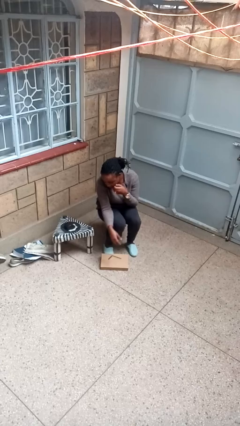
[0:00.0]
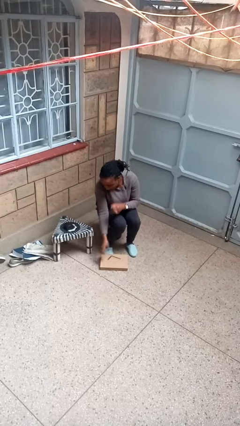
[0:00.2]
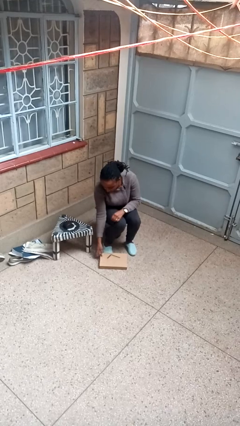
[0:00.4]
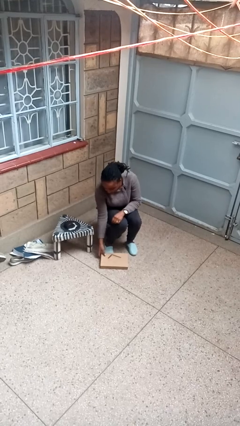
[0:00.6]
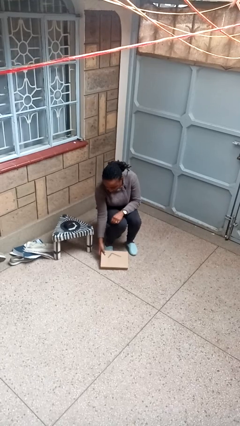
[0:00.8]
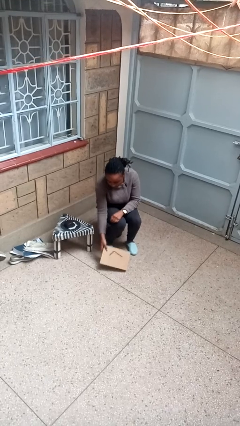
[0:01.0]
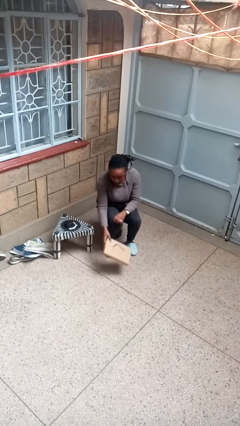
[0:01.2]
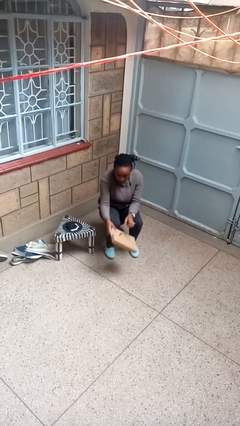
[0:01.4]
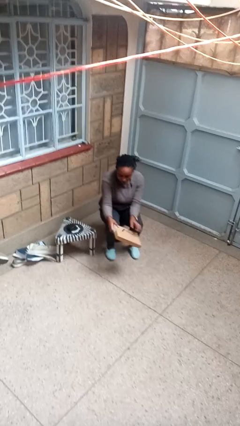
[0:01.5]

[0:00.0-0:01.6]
person picks up object from floor

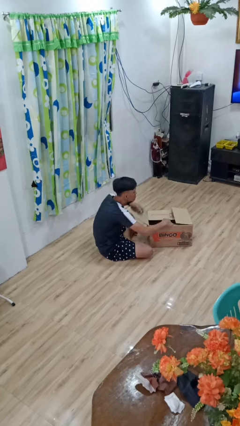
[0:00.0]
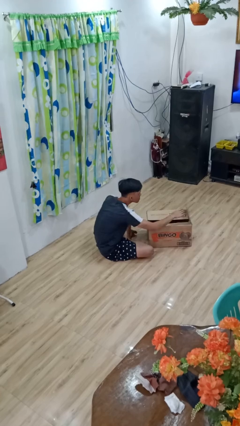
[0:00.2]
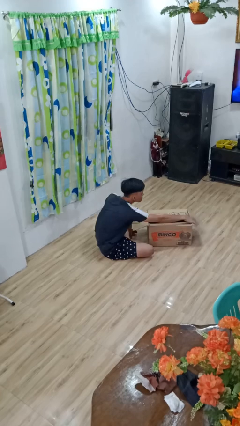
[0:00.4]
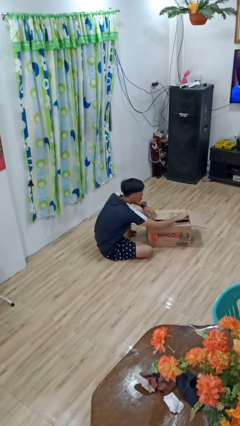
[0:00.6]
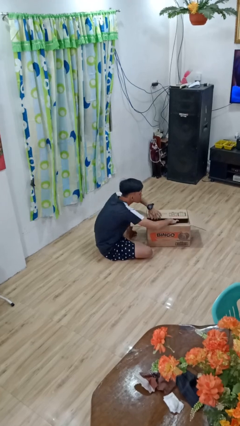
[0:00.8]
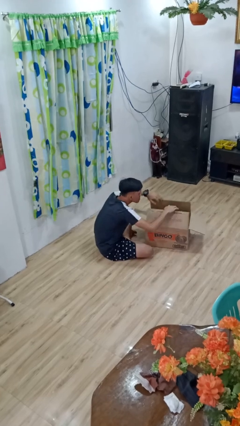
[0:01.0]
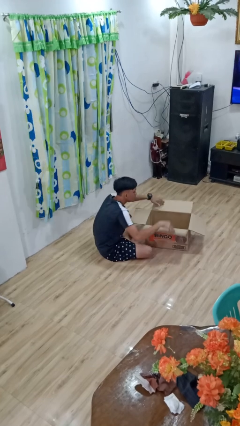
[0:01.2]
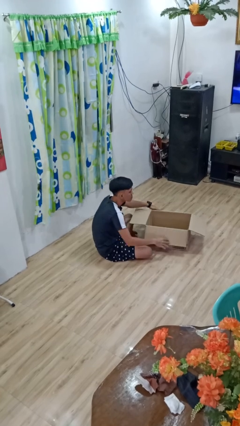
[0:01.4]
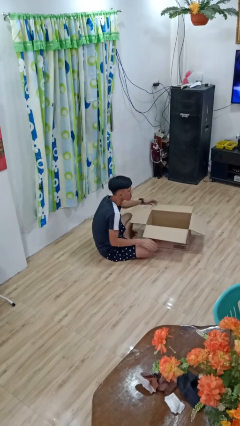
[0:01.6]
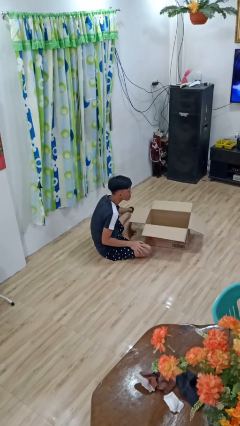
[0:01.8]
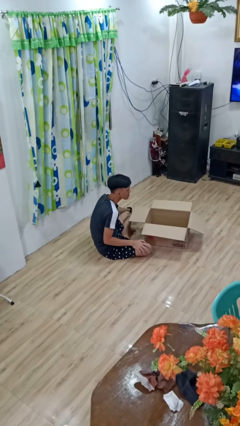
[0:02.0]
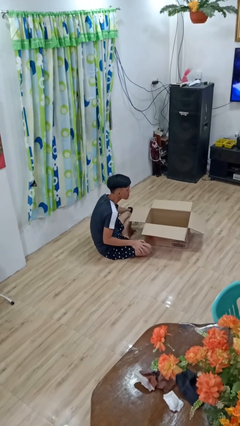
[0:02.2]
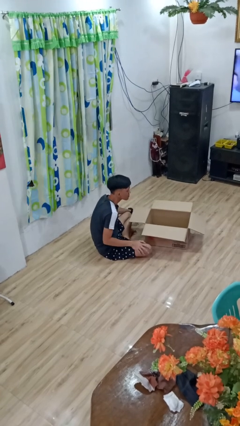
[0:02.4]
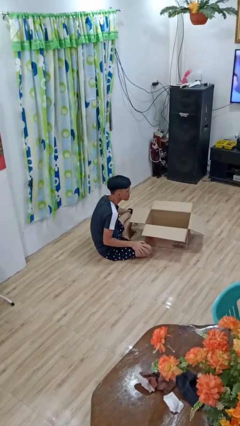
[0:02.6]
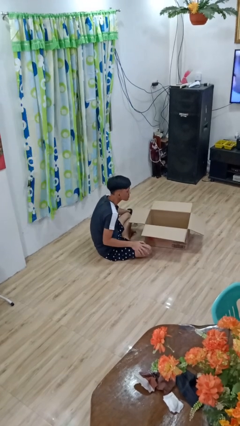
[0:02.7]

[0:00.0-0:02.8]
person opens box

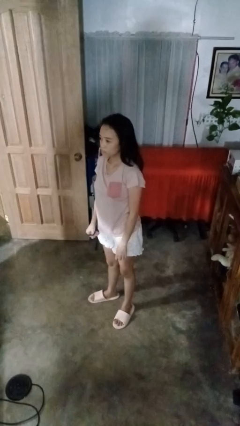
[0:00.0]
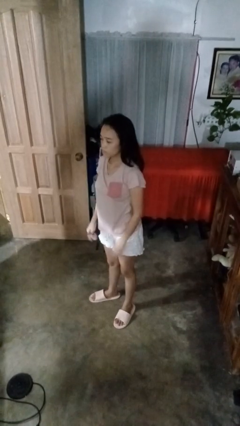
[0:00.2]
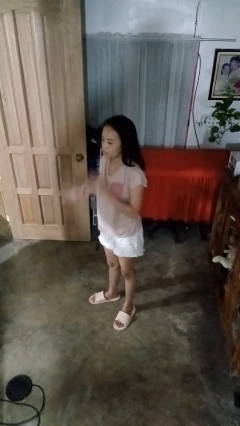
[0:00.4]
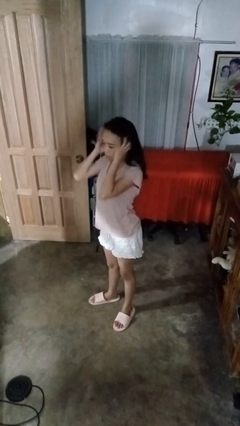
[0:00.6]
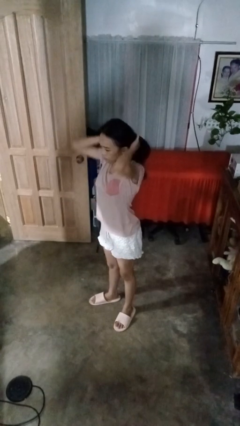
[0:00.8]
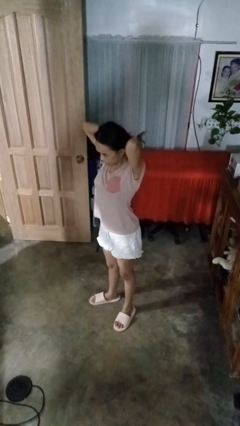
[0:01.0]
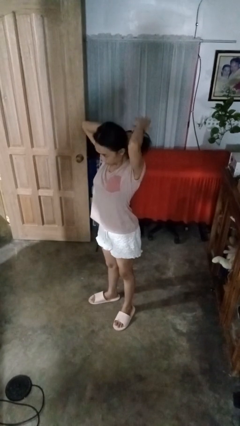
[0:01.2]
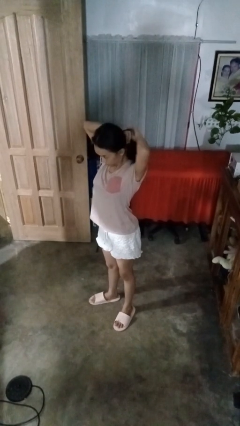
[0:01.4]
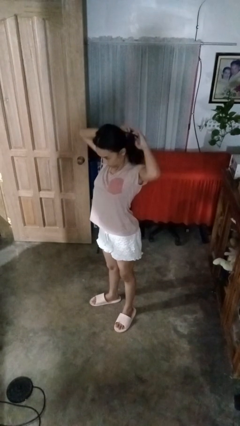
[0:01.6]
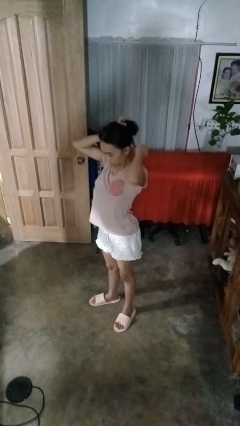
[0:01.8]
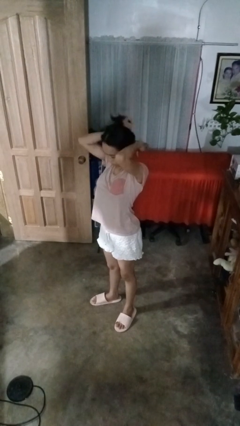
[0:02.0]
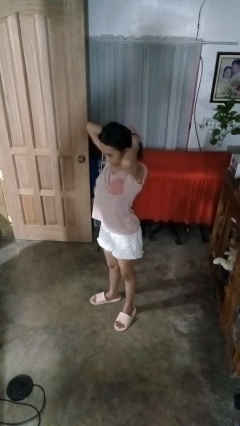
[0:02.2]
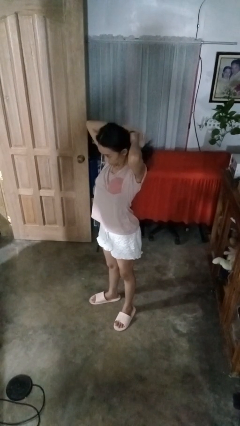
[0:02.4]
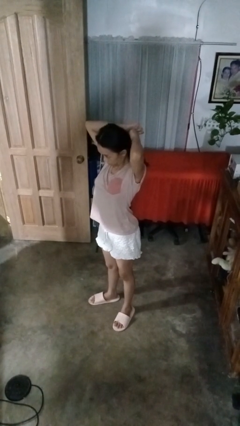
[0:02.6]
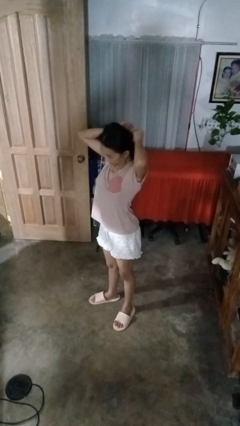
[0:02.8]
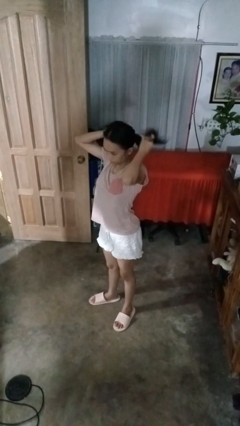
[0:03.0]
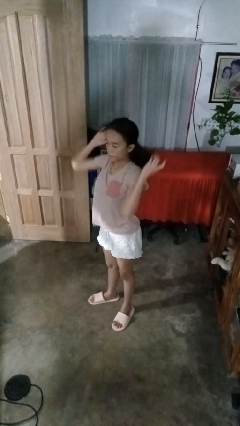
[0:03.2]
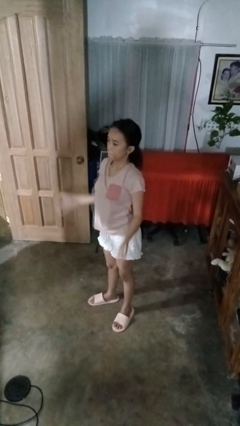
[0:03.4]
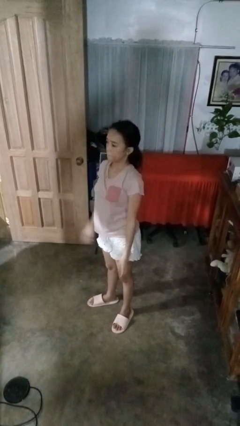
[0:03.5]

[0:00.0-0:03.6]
person puts hair in ponytail

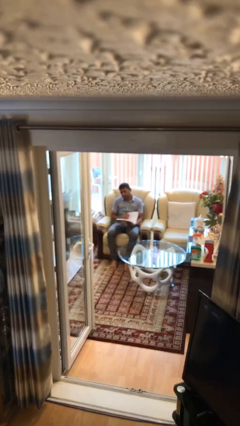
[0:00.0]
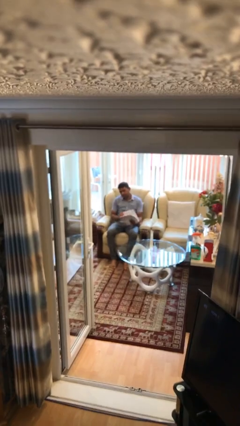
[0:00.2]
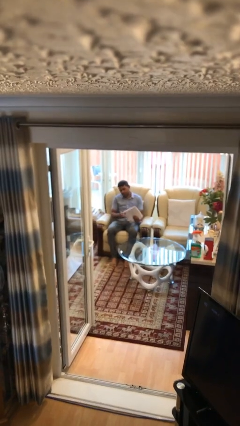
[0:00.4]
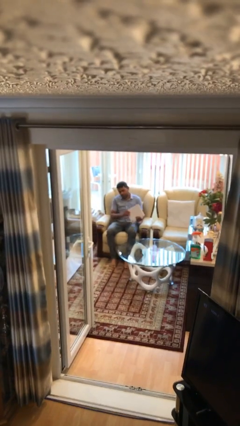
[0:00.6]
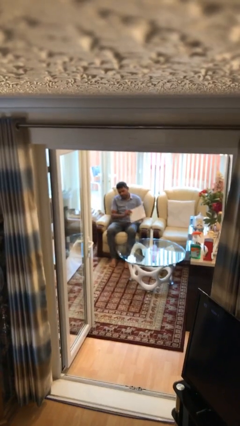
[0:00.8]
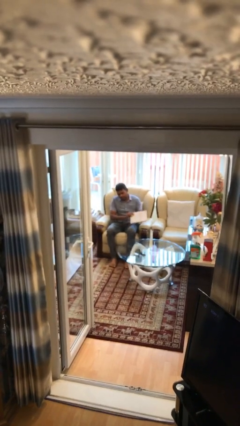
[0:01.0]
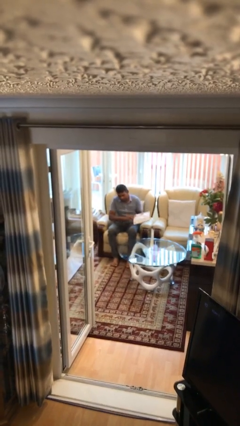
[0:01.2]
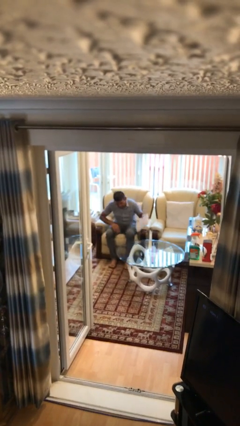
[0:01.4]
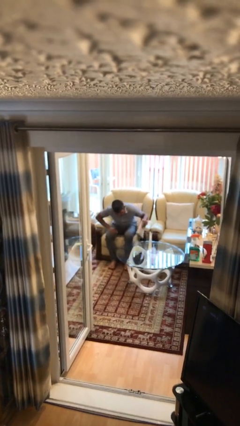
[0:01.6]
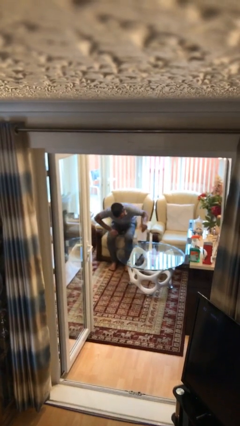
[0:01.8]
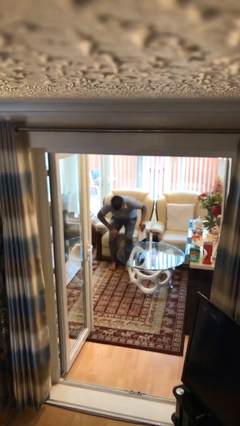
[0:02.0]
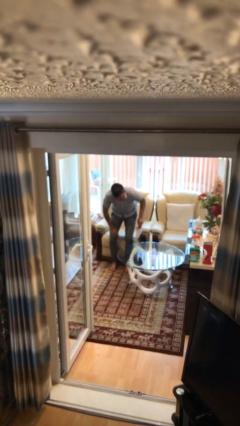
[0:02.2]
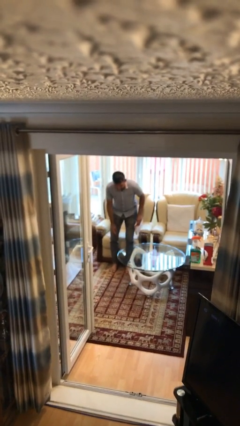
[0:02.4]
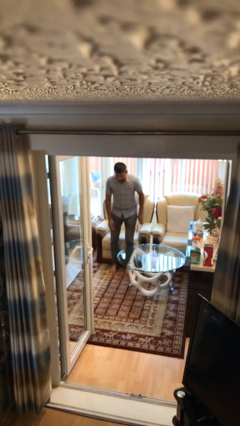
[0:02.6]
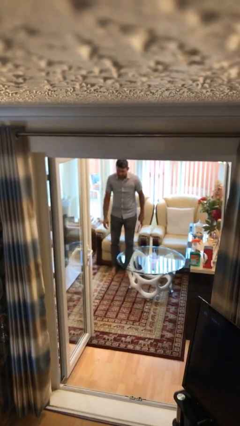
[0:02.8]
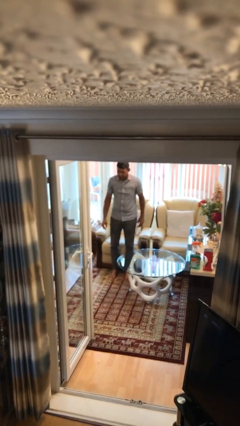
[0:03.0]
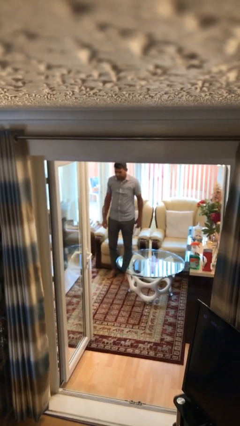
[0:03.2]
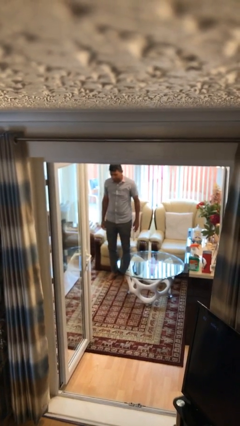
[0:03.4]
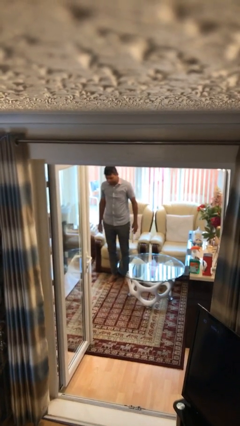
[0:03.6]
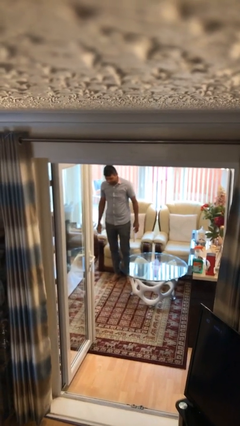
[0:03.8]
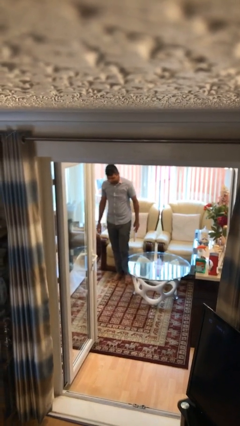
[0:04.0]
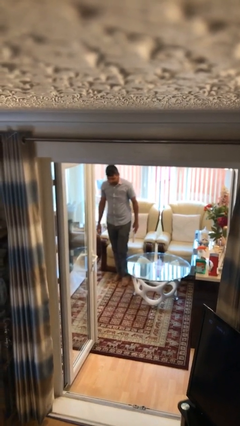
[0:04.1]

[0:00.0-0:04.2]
person stands up

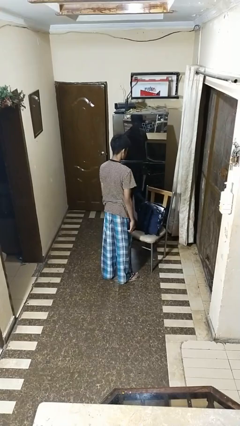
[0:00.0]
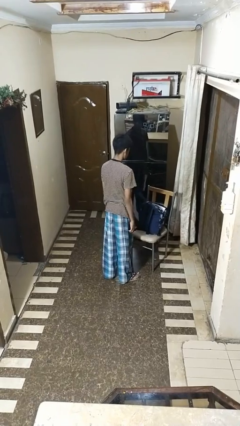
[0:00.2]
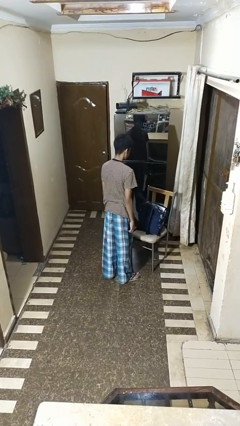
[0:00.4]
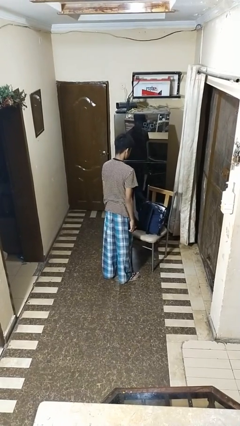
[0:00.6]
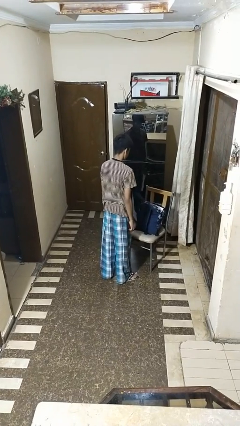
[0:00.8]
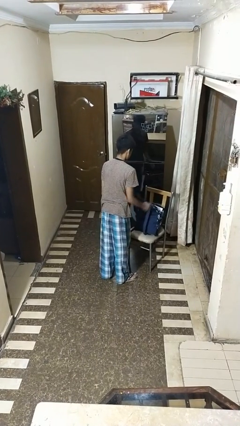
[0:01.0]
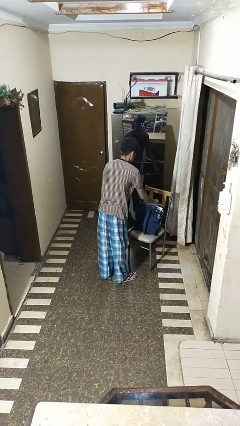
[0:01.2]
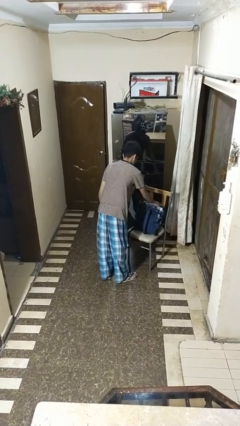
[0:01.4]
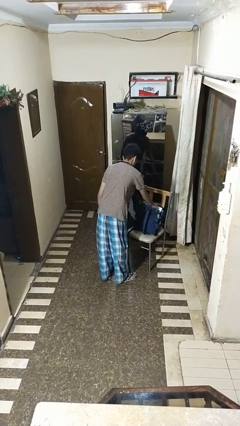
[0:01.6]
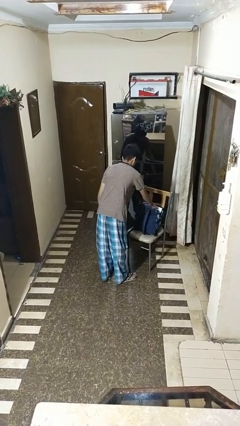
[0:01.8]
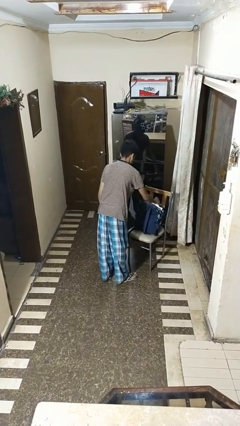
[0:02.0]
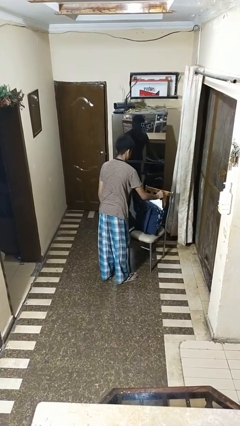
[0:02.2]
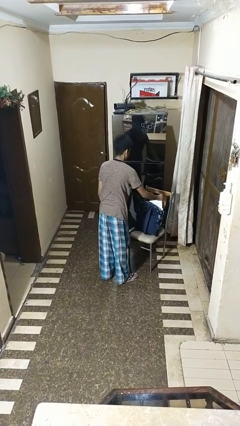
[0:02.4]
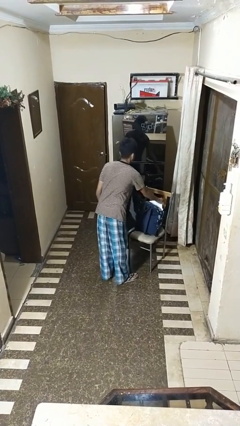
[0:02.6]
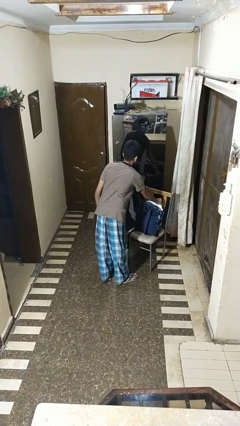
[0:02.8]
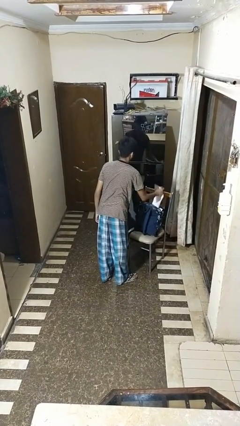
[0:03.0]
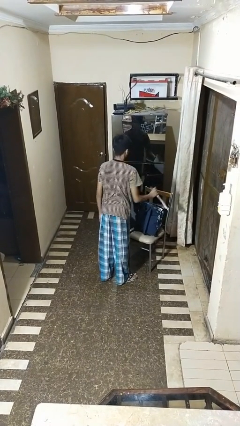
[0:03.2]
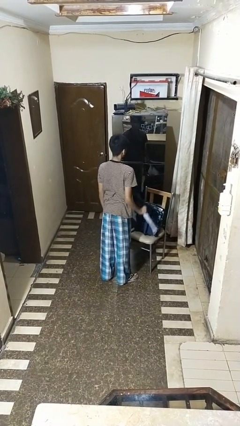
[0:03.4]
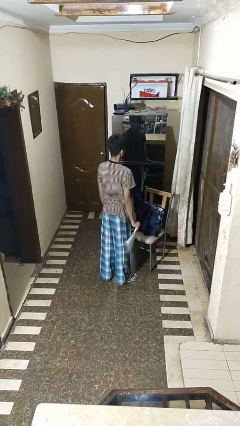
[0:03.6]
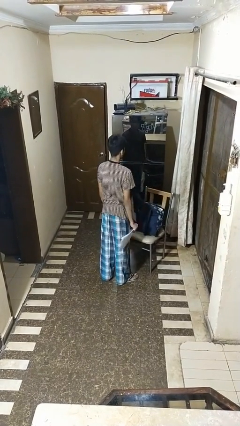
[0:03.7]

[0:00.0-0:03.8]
person takes object from bag

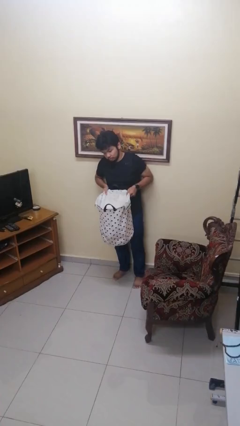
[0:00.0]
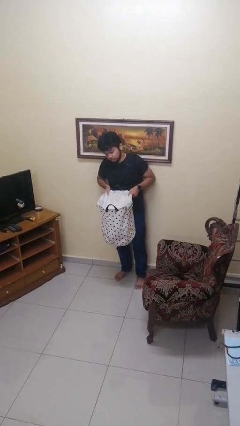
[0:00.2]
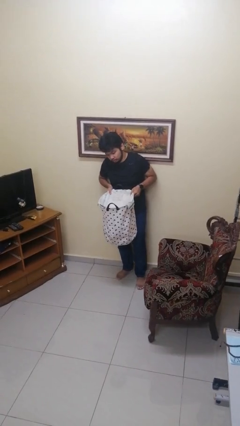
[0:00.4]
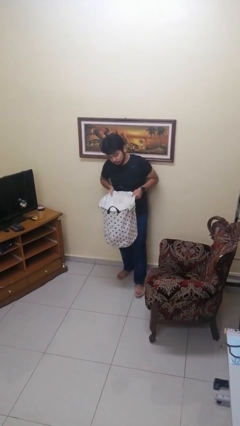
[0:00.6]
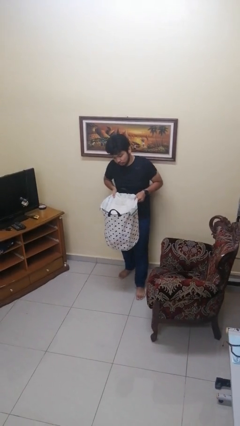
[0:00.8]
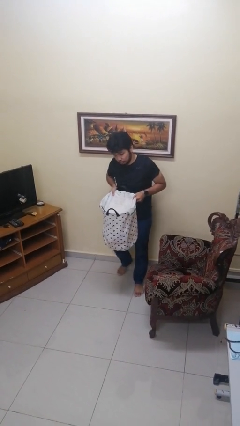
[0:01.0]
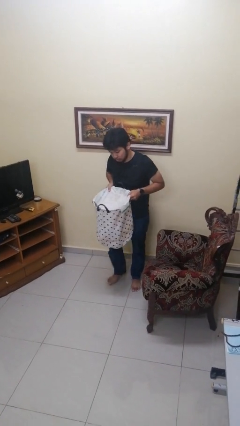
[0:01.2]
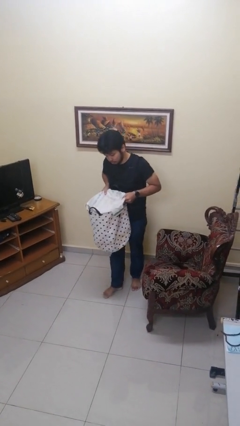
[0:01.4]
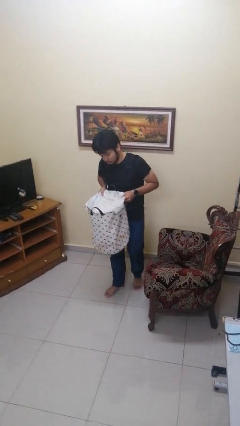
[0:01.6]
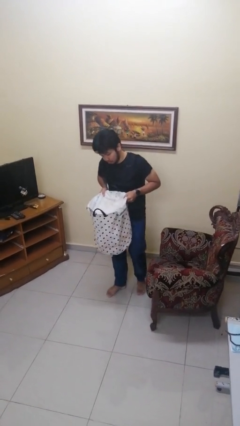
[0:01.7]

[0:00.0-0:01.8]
person carries laundry basket
